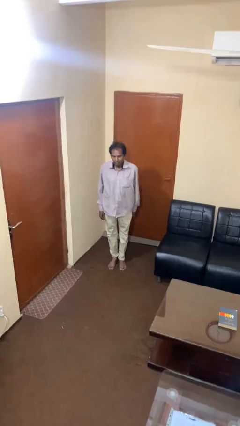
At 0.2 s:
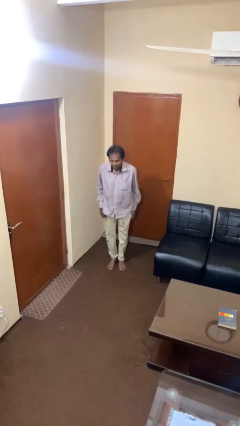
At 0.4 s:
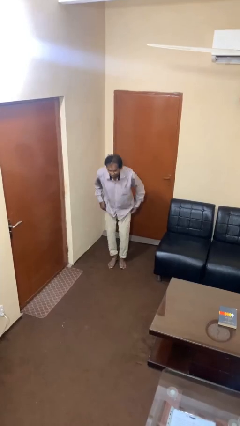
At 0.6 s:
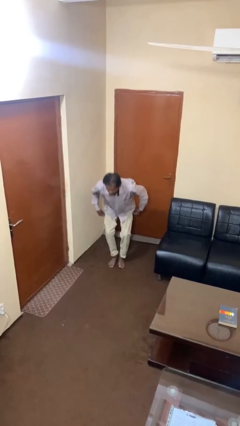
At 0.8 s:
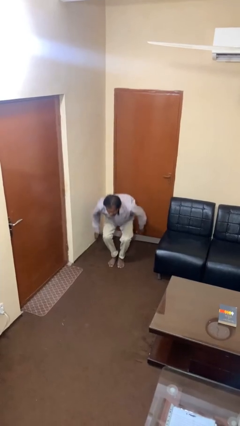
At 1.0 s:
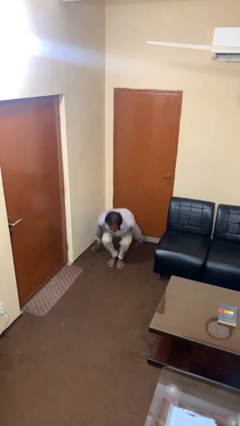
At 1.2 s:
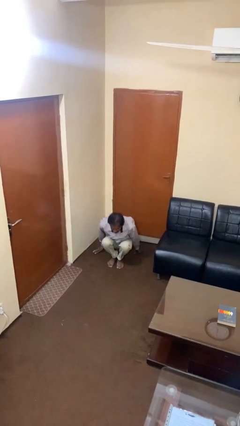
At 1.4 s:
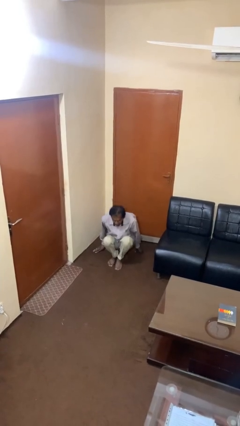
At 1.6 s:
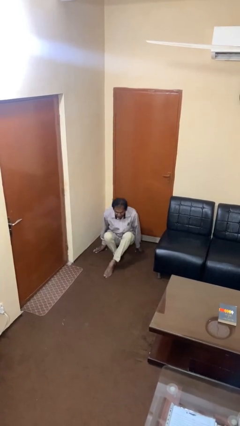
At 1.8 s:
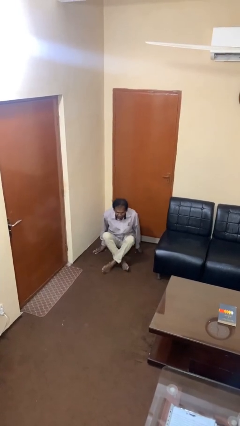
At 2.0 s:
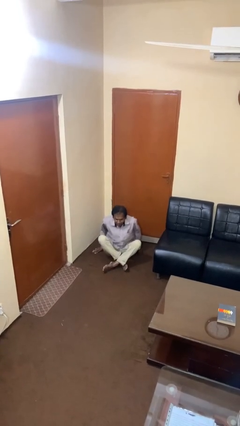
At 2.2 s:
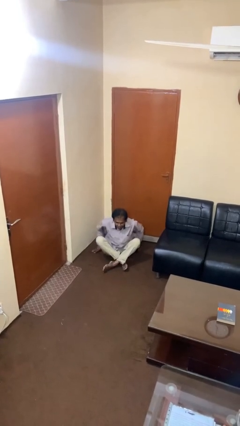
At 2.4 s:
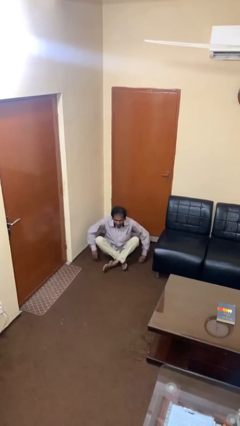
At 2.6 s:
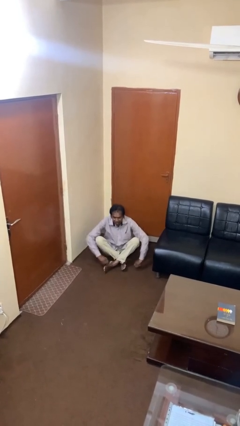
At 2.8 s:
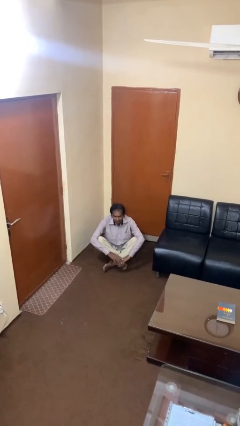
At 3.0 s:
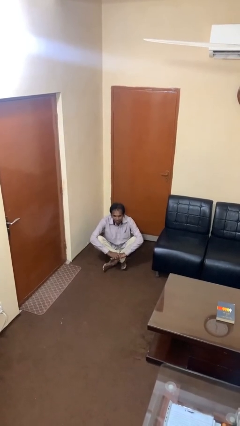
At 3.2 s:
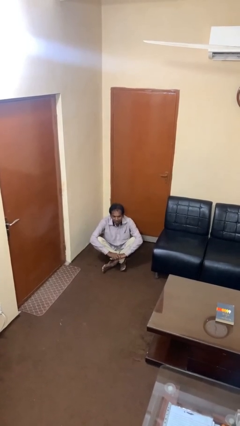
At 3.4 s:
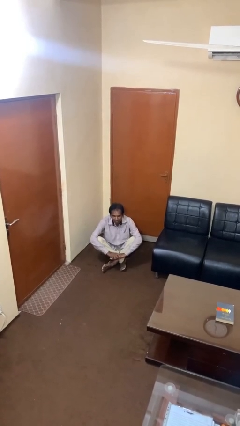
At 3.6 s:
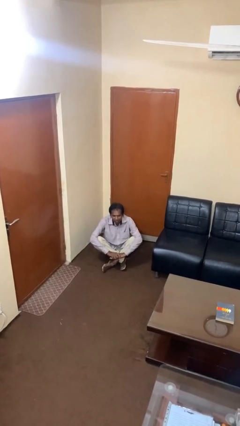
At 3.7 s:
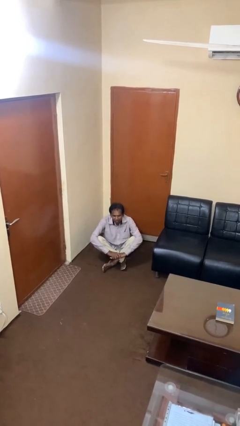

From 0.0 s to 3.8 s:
person sits crisscross

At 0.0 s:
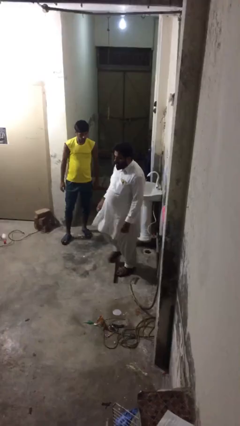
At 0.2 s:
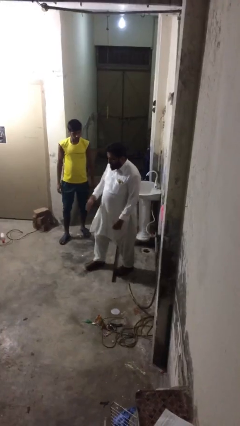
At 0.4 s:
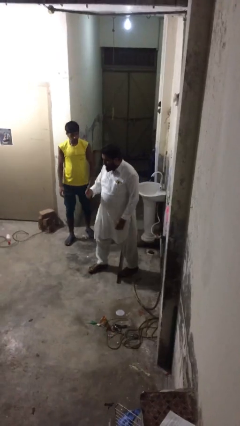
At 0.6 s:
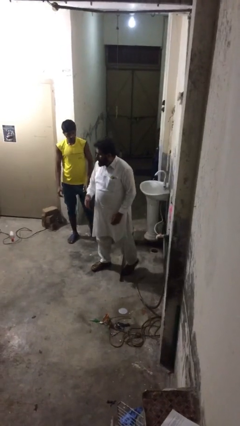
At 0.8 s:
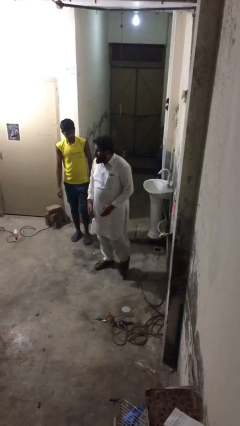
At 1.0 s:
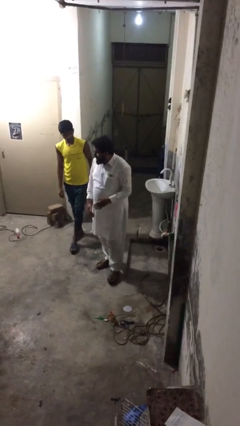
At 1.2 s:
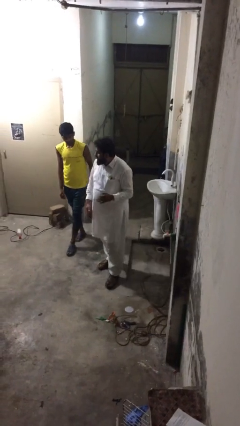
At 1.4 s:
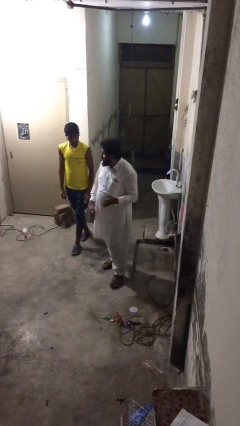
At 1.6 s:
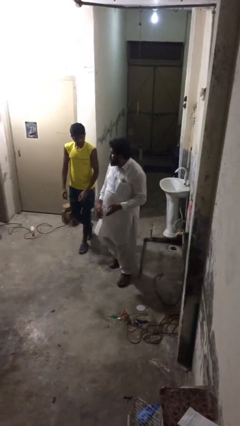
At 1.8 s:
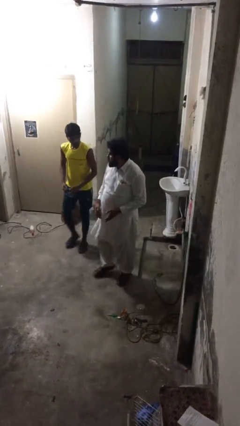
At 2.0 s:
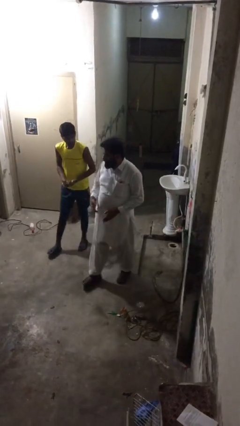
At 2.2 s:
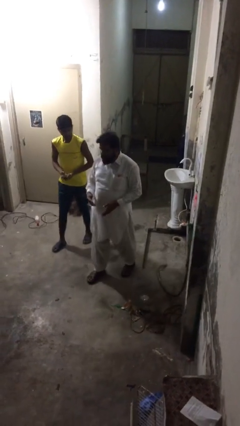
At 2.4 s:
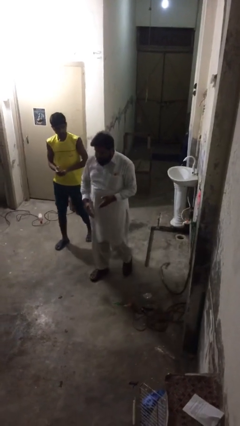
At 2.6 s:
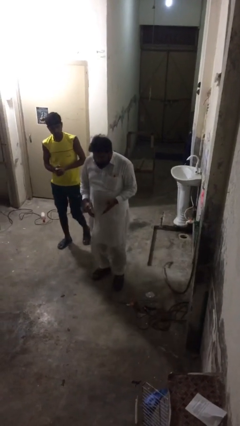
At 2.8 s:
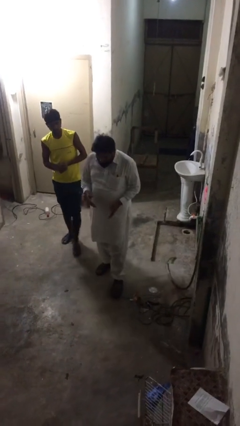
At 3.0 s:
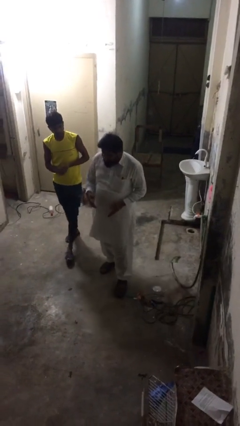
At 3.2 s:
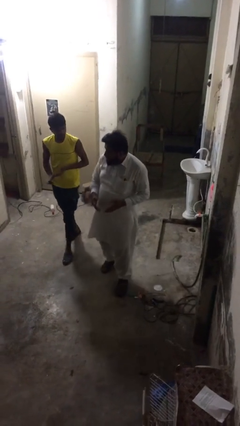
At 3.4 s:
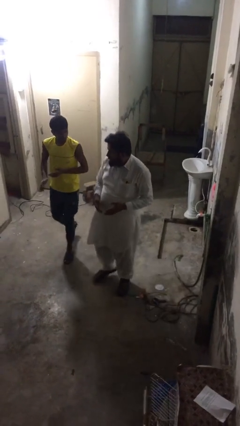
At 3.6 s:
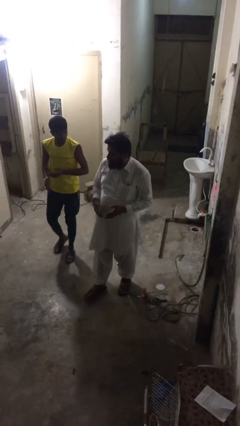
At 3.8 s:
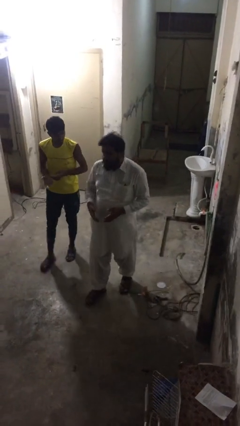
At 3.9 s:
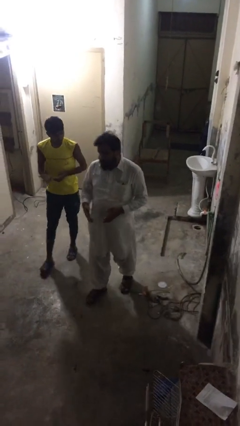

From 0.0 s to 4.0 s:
person talks to person

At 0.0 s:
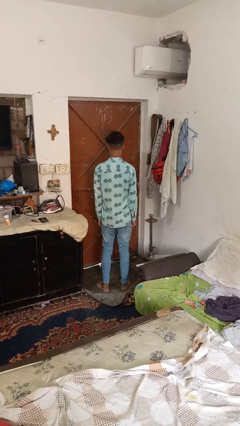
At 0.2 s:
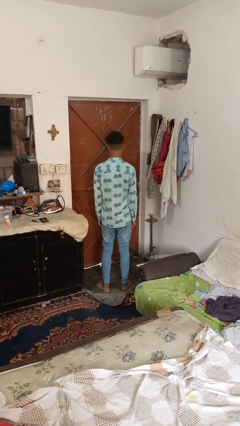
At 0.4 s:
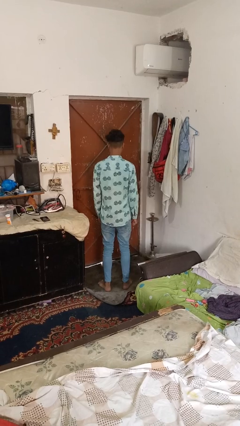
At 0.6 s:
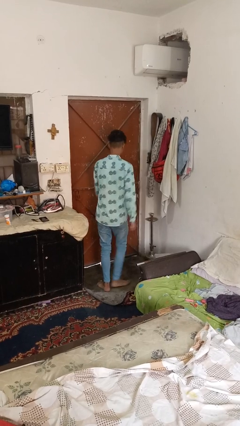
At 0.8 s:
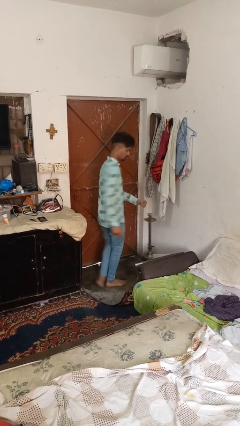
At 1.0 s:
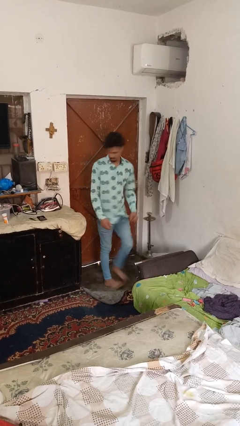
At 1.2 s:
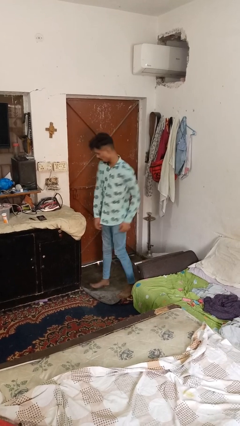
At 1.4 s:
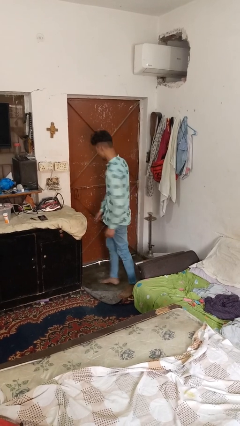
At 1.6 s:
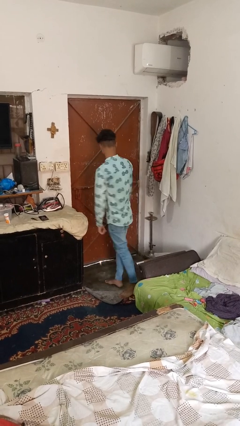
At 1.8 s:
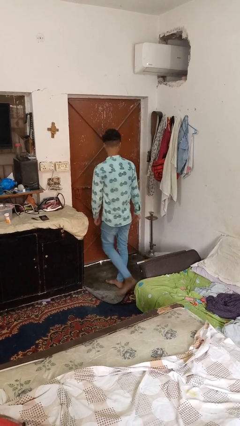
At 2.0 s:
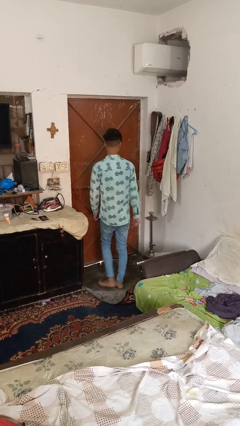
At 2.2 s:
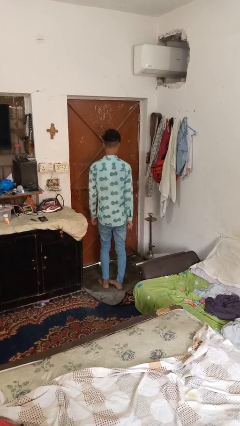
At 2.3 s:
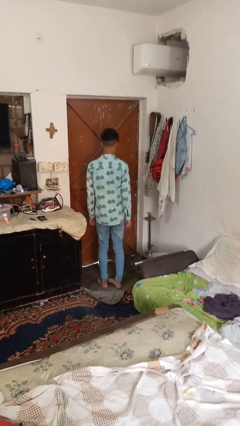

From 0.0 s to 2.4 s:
person twirls

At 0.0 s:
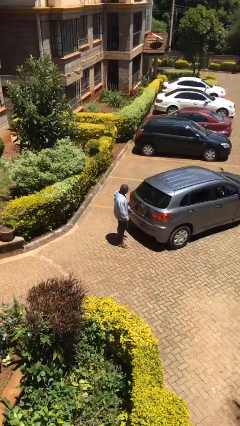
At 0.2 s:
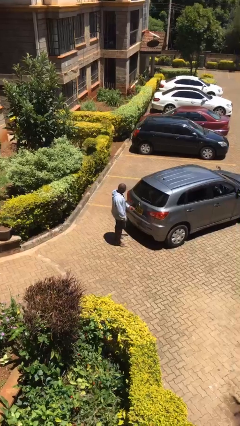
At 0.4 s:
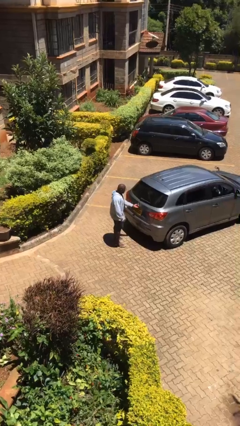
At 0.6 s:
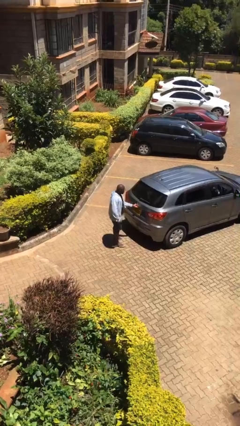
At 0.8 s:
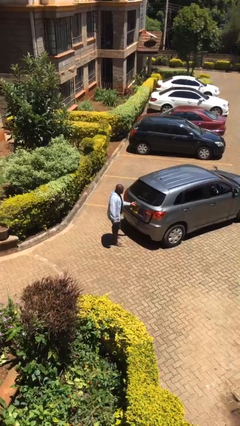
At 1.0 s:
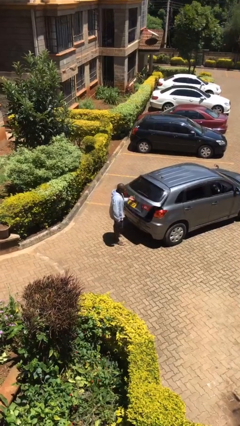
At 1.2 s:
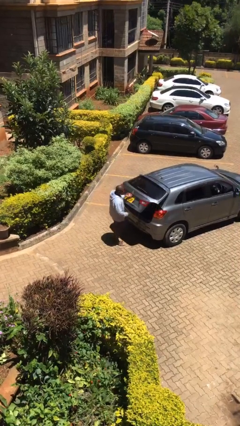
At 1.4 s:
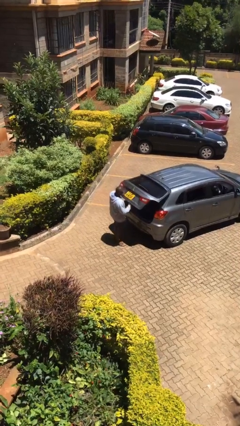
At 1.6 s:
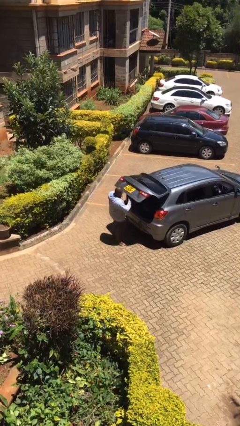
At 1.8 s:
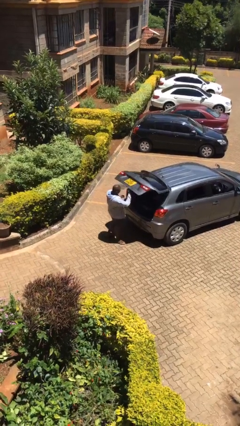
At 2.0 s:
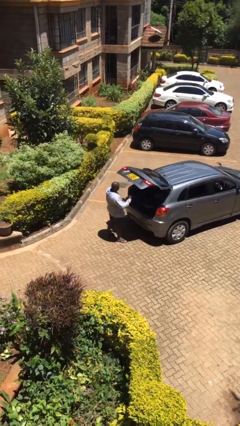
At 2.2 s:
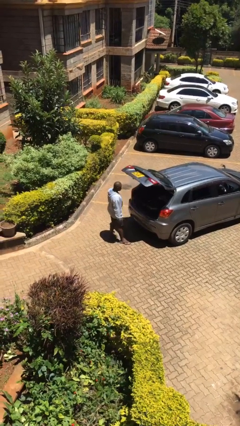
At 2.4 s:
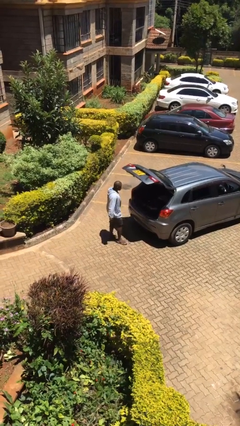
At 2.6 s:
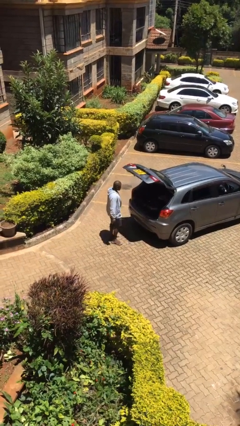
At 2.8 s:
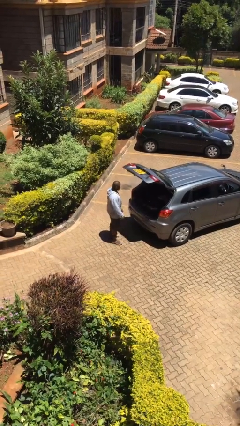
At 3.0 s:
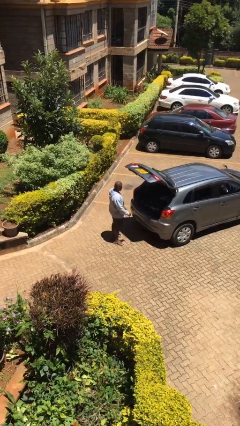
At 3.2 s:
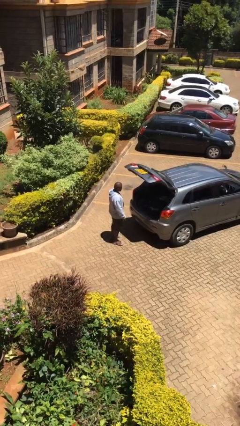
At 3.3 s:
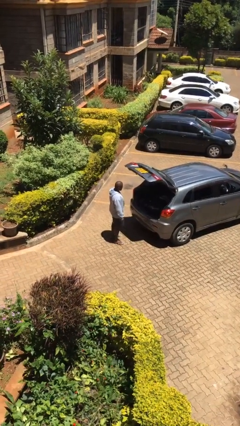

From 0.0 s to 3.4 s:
person opens car trunk

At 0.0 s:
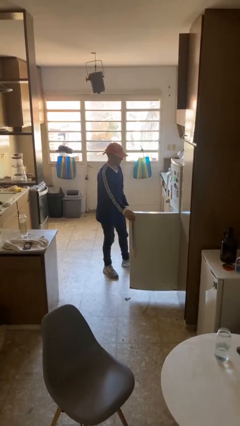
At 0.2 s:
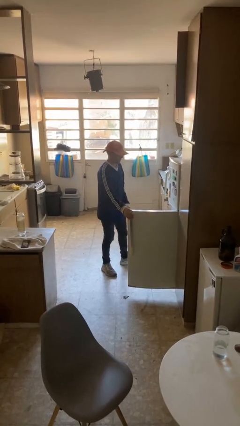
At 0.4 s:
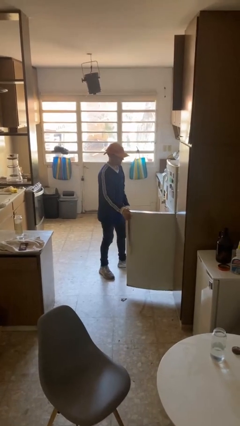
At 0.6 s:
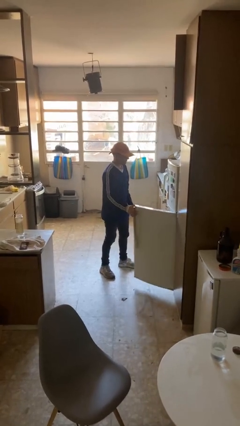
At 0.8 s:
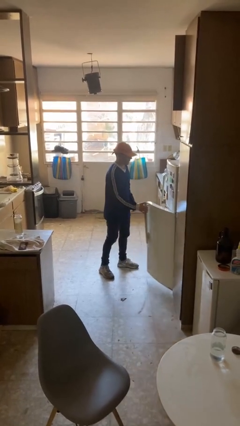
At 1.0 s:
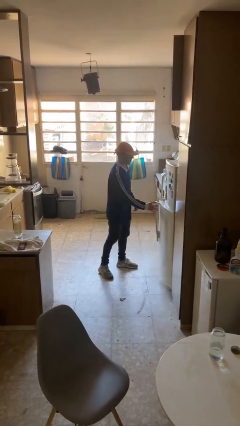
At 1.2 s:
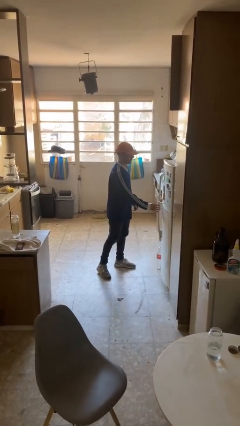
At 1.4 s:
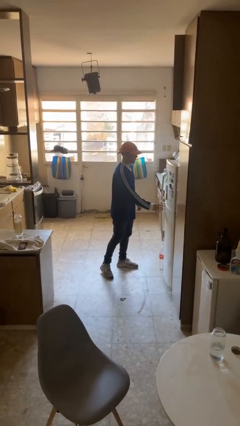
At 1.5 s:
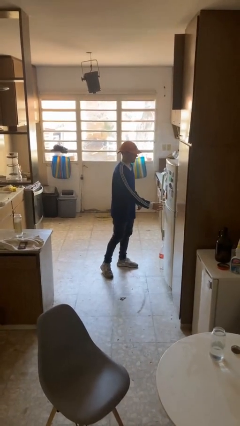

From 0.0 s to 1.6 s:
person closes refrigerator

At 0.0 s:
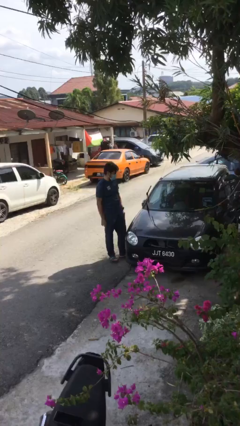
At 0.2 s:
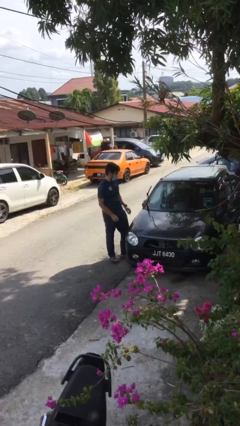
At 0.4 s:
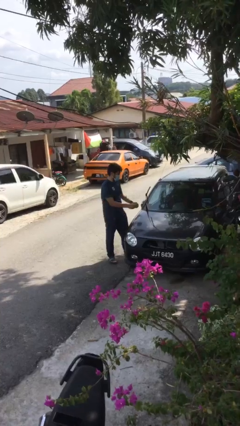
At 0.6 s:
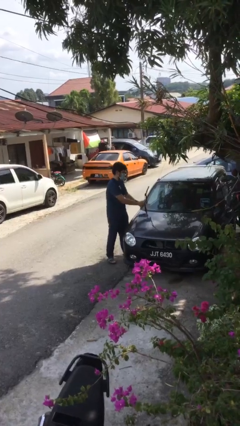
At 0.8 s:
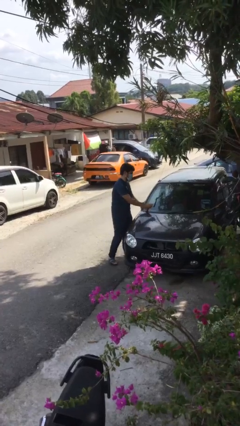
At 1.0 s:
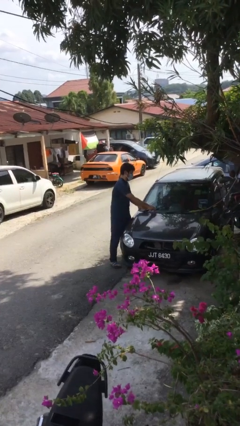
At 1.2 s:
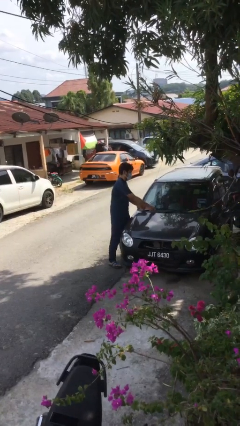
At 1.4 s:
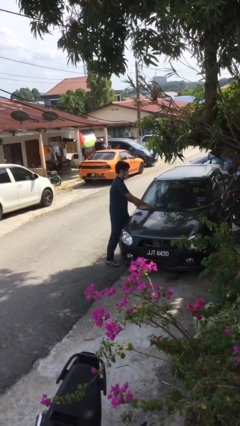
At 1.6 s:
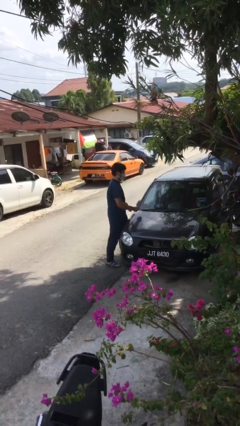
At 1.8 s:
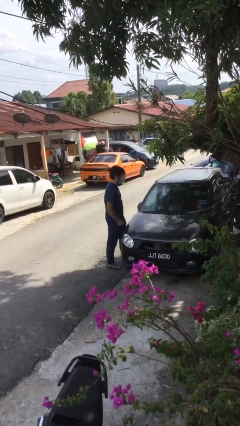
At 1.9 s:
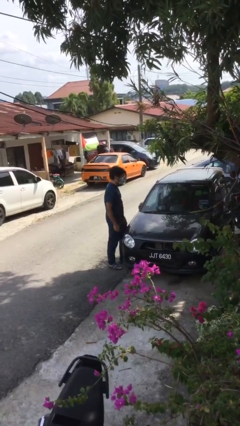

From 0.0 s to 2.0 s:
person flips down car wipers
